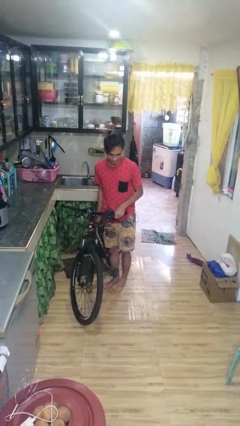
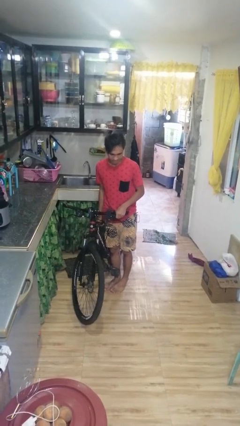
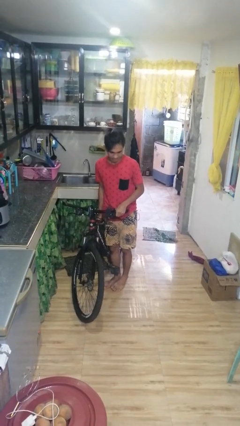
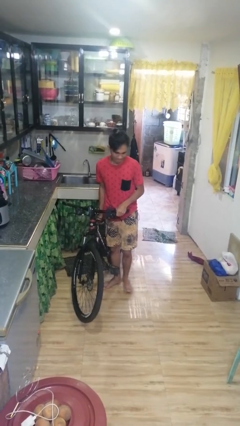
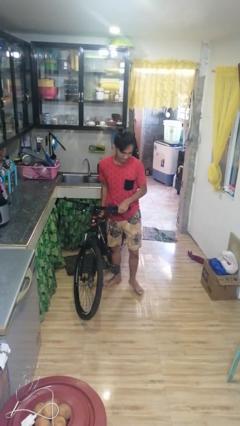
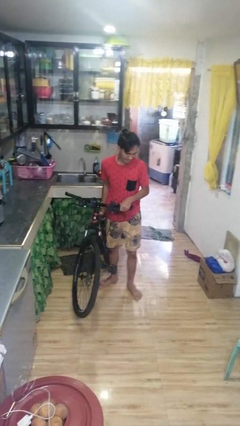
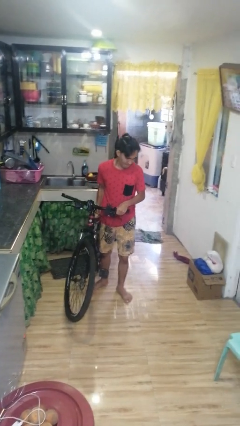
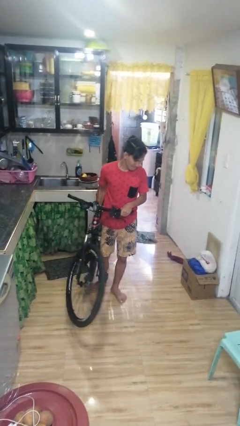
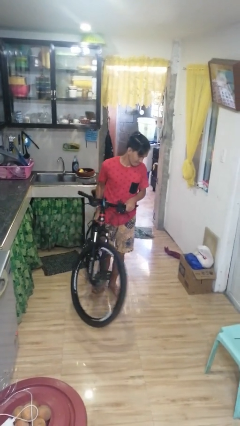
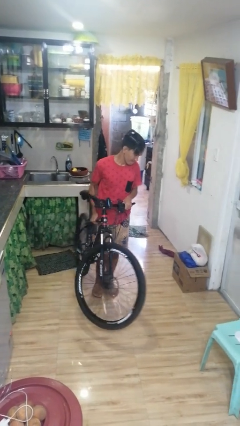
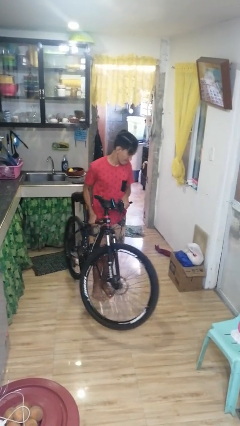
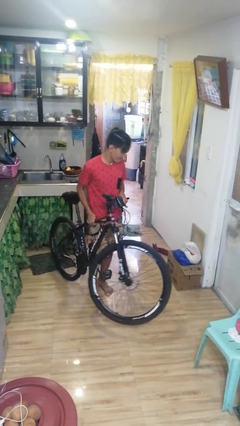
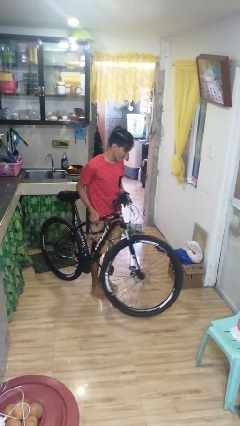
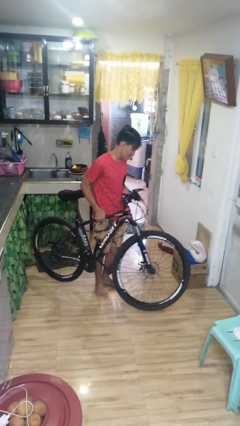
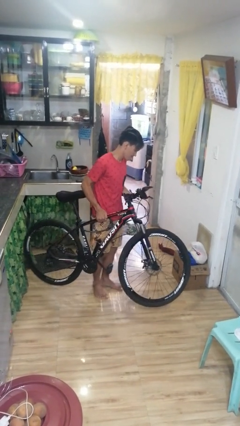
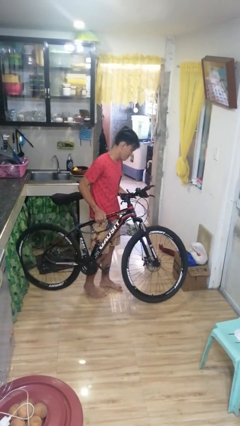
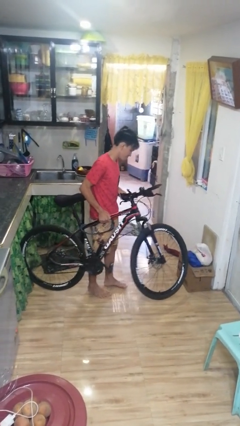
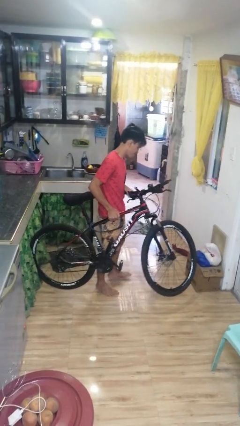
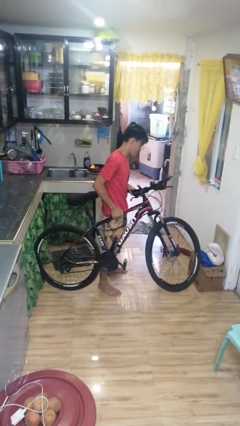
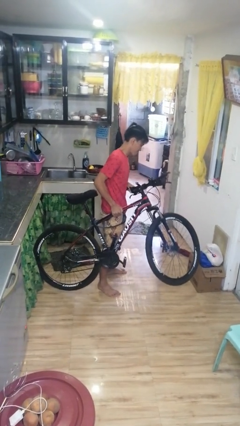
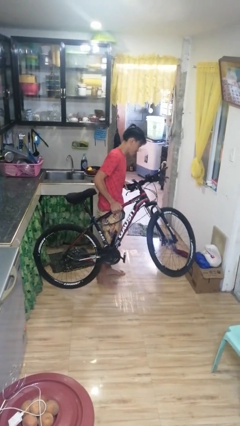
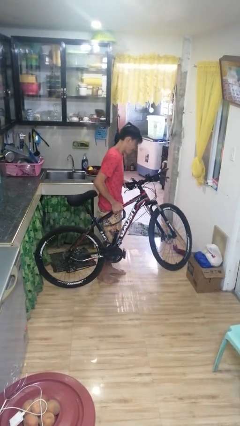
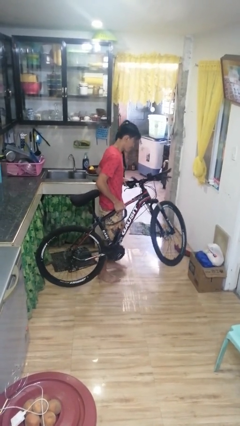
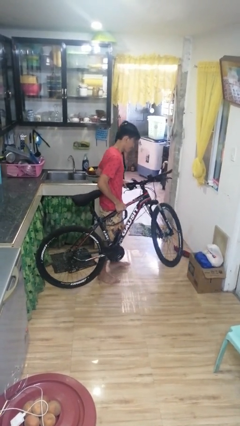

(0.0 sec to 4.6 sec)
person carries bicycle

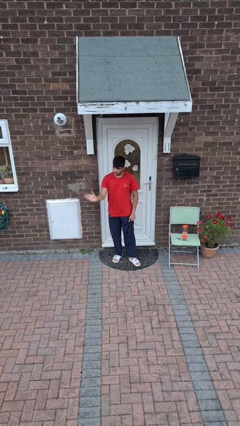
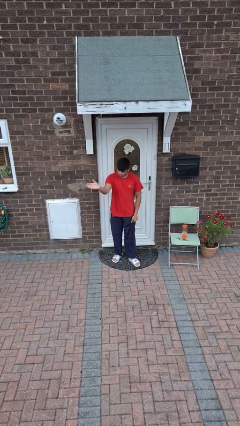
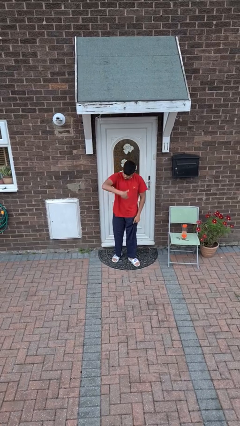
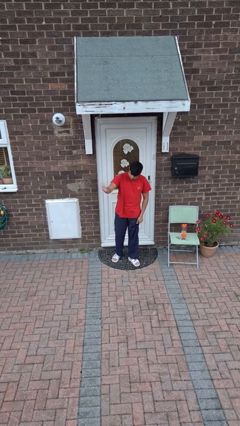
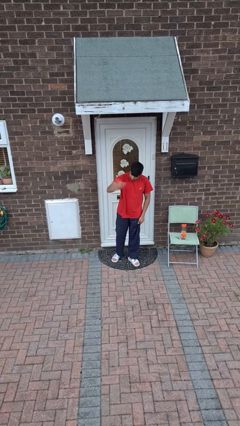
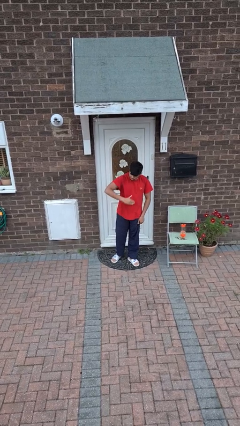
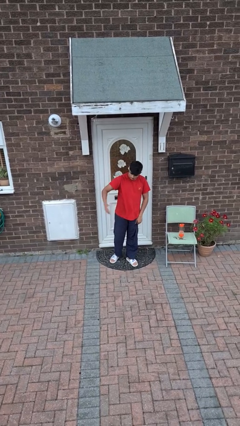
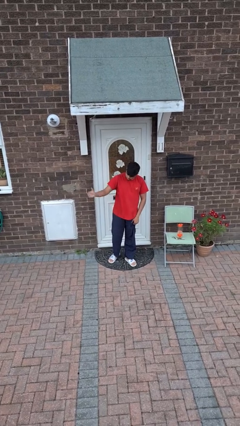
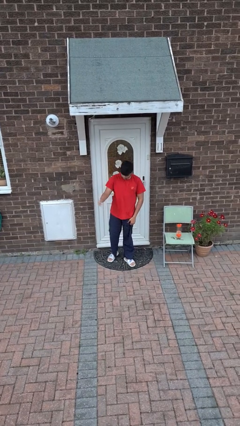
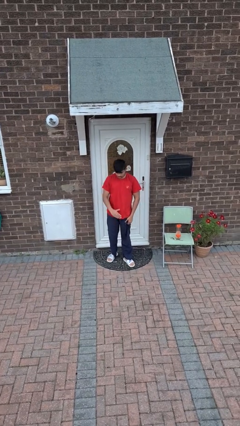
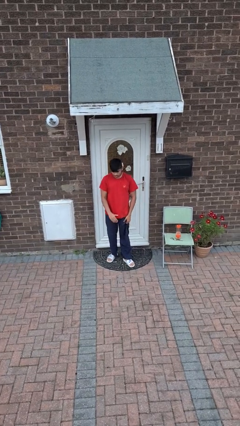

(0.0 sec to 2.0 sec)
person gestures come here

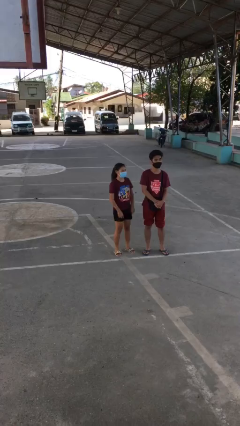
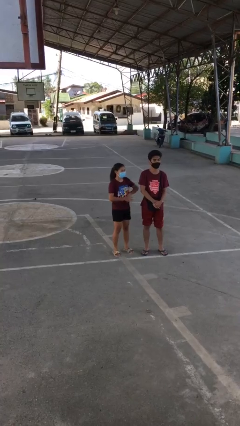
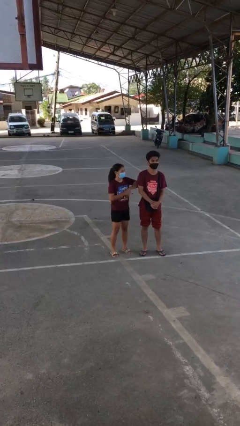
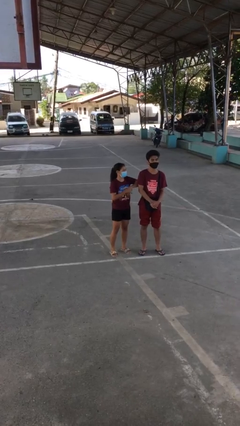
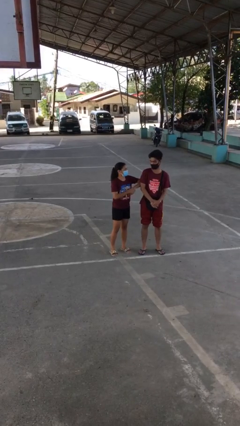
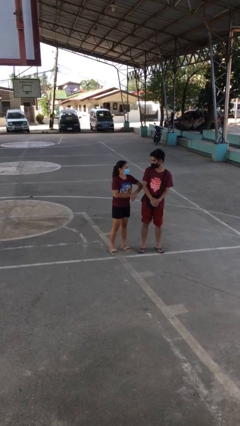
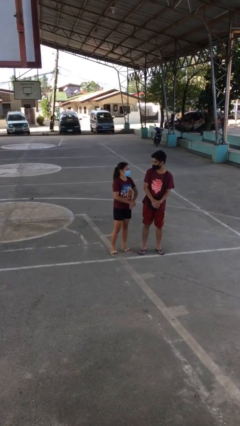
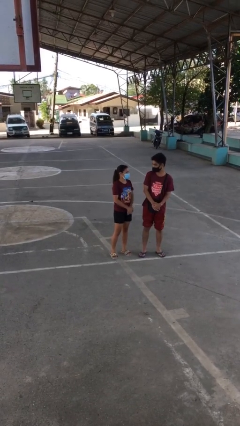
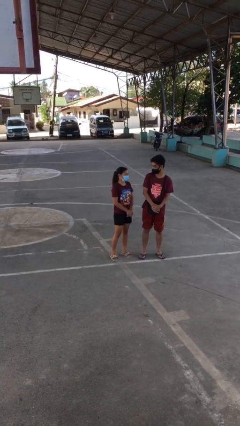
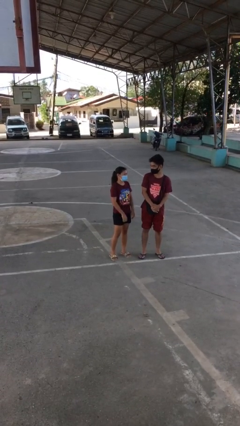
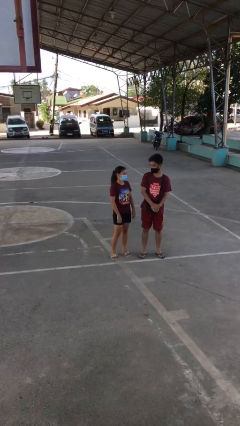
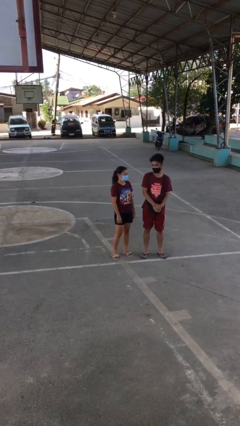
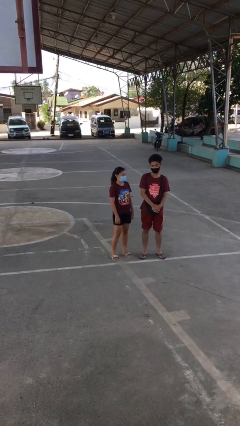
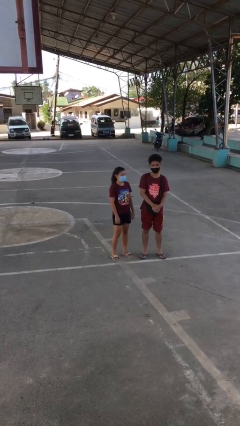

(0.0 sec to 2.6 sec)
person nudges person with elbow

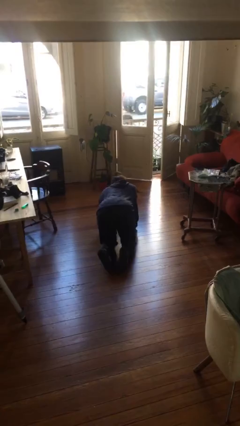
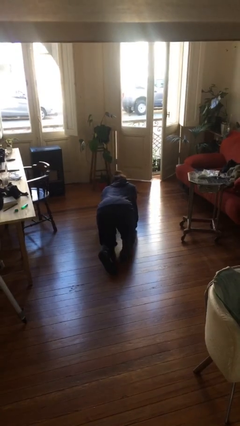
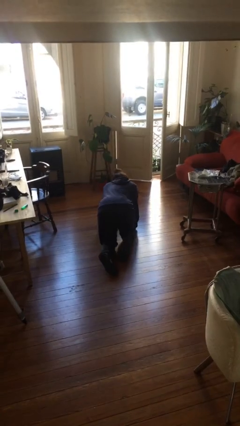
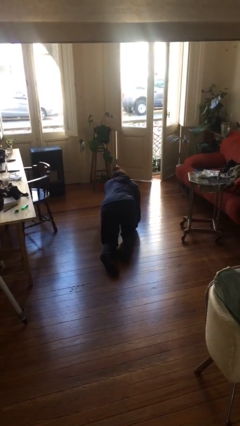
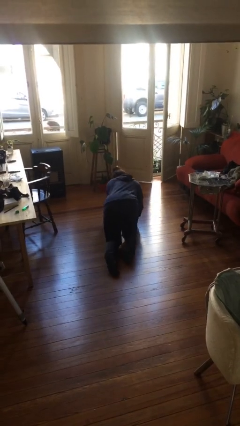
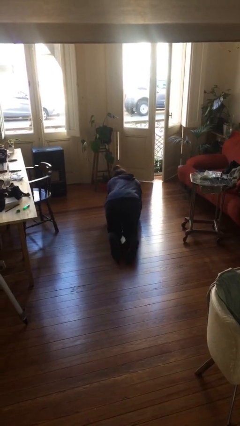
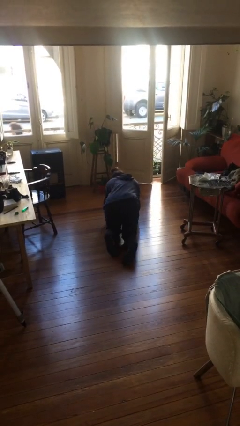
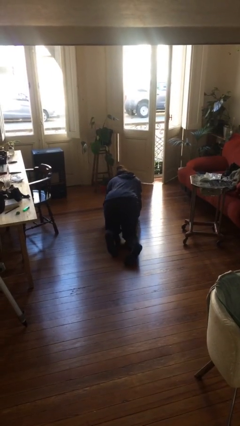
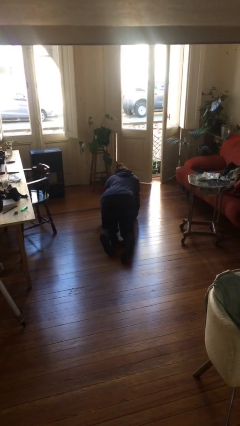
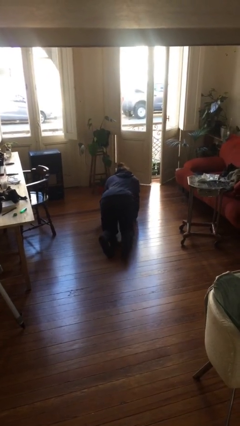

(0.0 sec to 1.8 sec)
person crawls

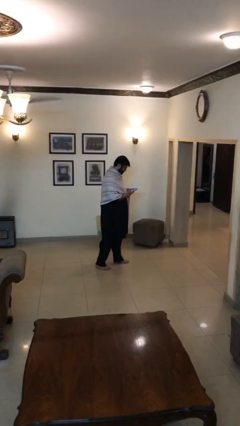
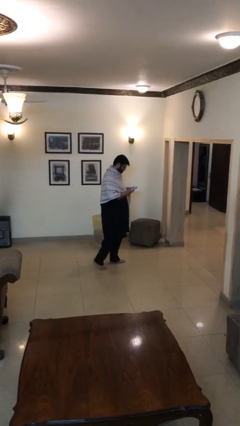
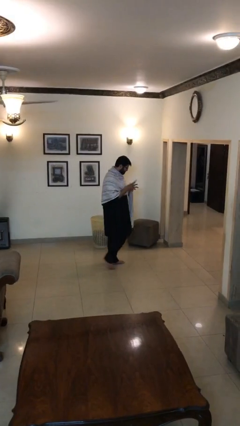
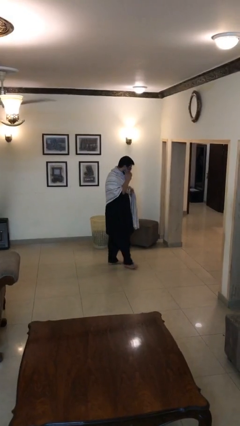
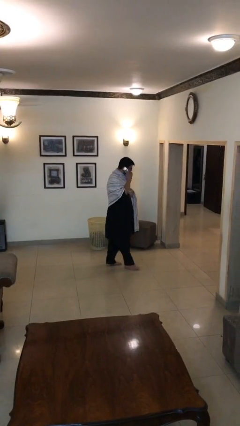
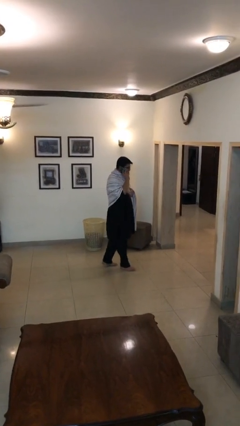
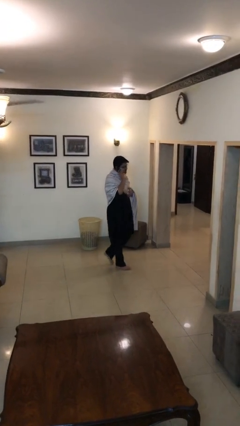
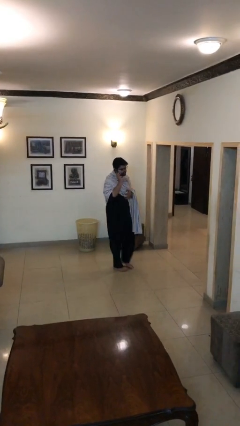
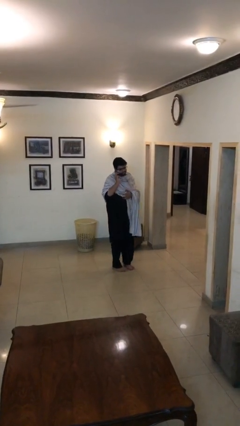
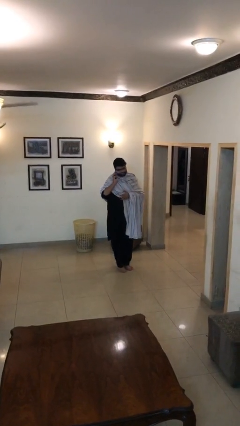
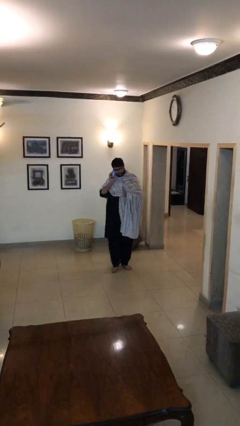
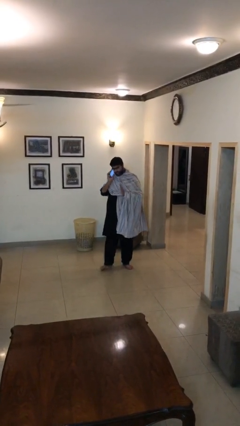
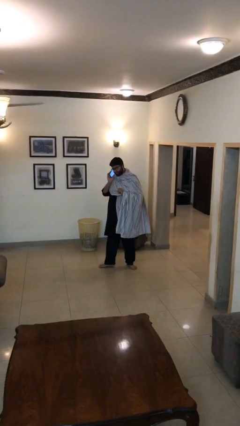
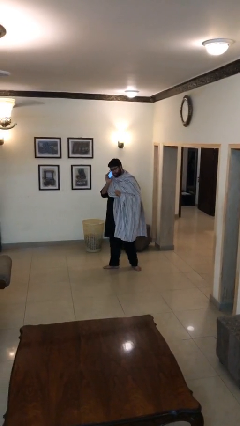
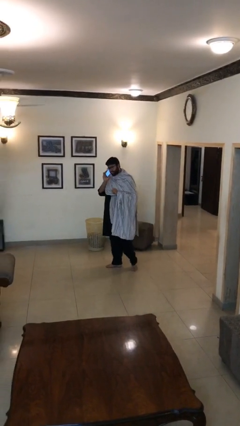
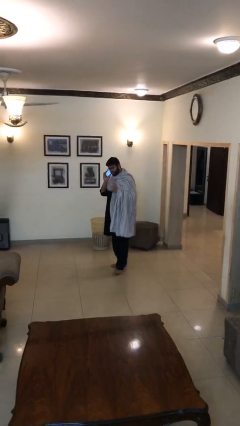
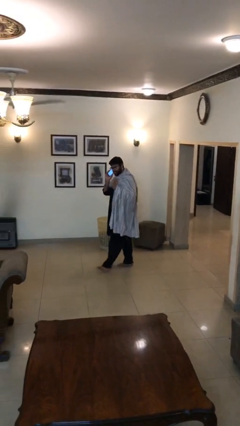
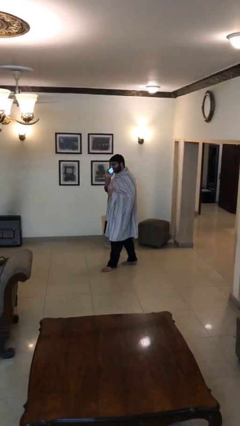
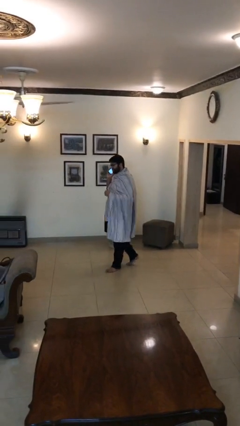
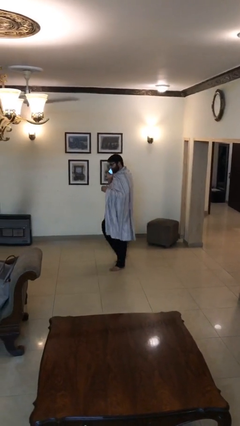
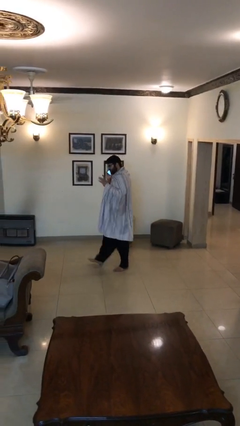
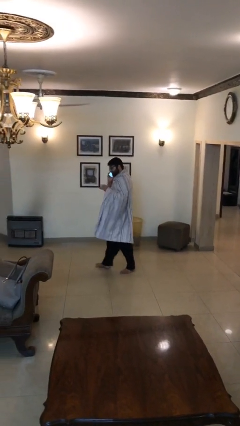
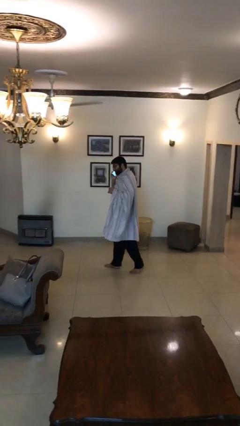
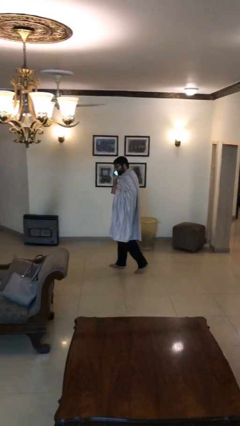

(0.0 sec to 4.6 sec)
person talks on phone

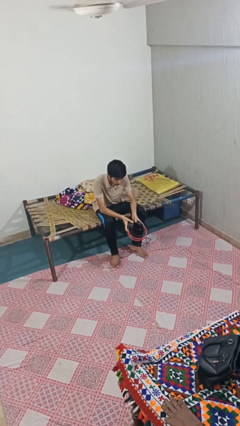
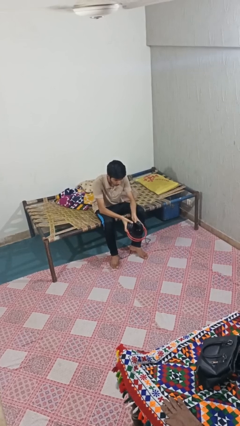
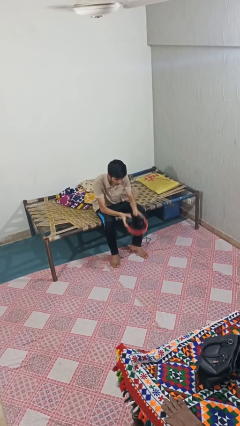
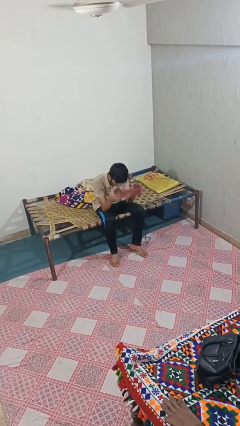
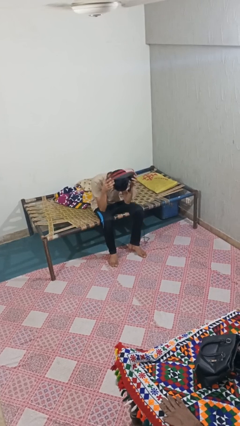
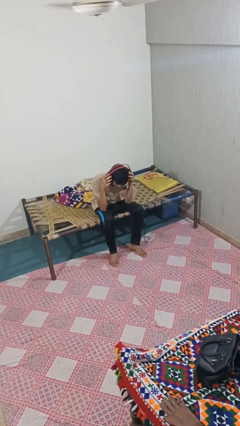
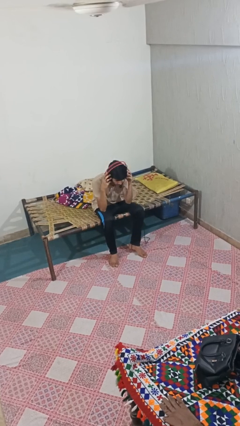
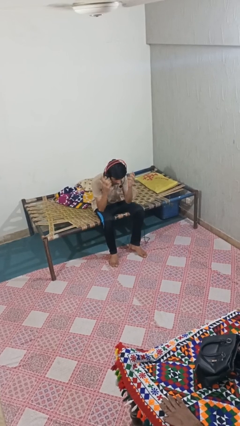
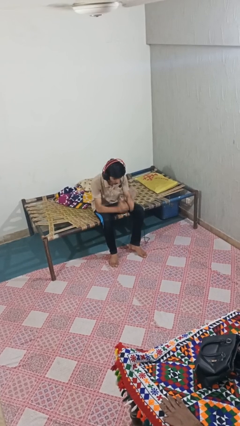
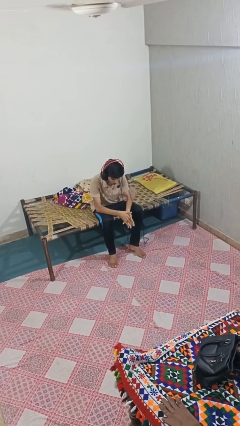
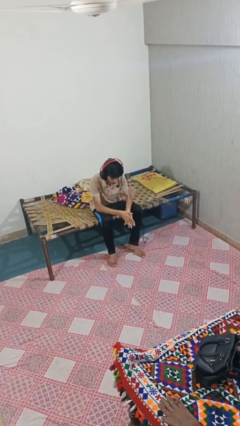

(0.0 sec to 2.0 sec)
person puts on headphones
